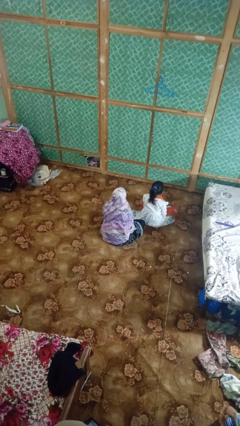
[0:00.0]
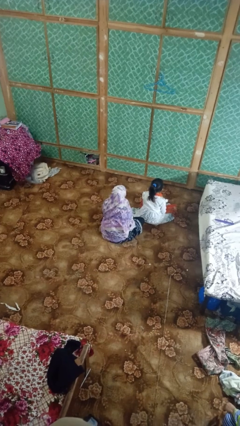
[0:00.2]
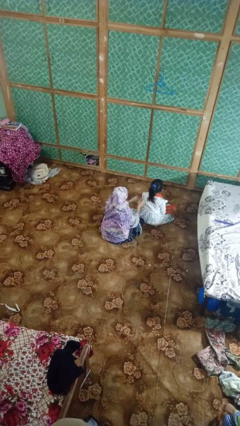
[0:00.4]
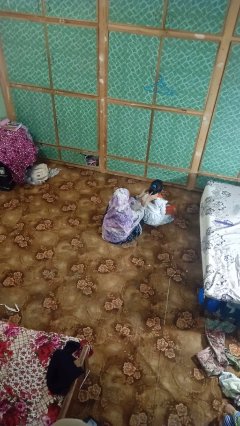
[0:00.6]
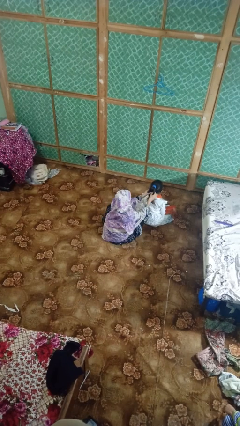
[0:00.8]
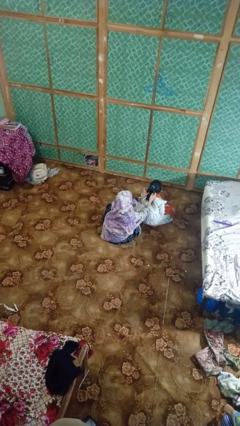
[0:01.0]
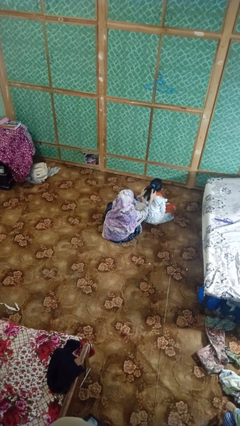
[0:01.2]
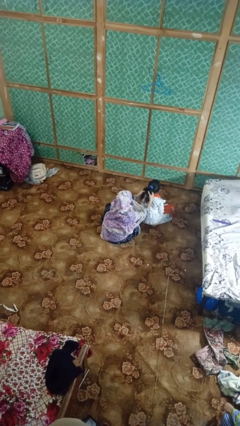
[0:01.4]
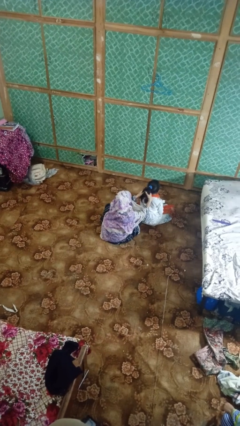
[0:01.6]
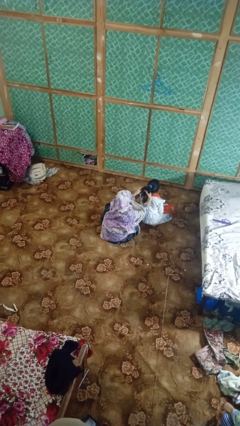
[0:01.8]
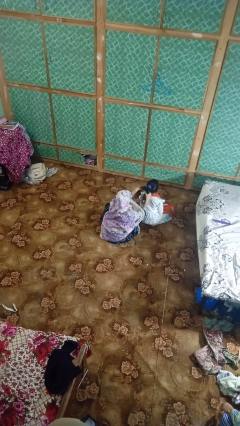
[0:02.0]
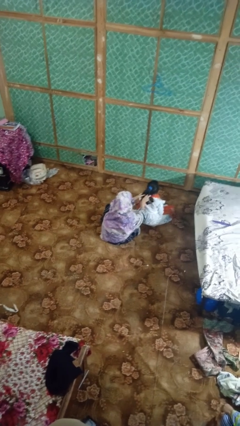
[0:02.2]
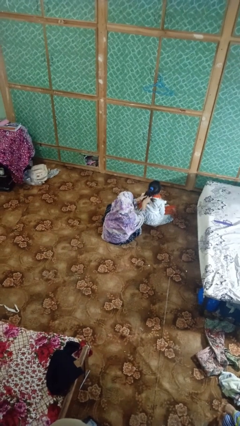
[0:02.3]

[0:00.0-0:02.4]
person braids hair of person

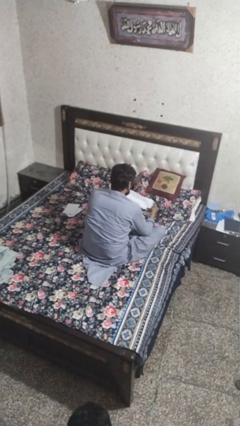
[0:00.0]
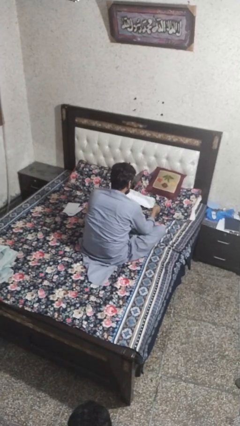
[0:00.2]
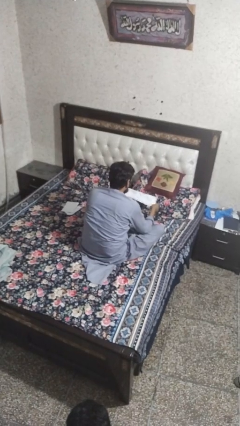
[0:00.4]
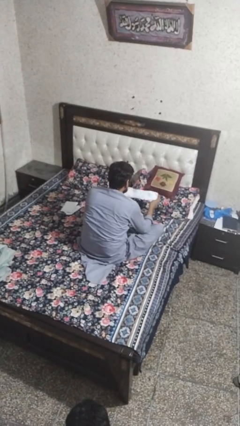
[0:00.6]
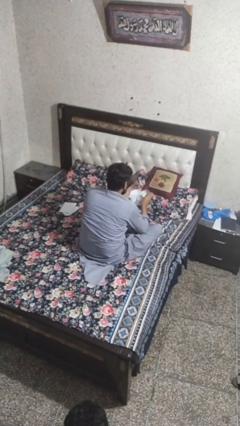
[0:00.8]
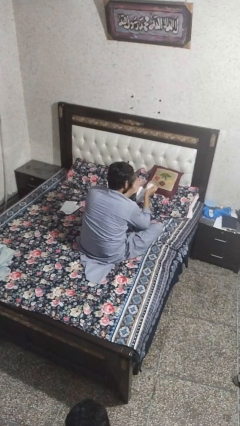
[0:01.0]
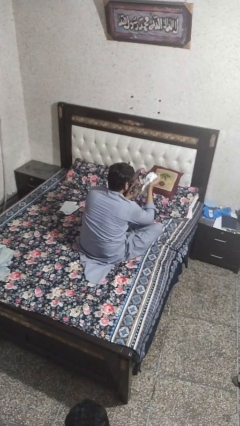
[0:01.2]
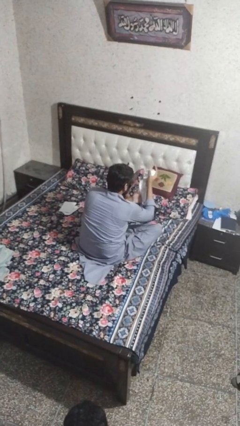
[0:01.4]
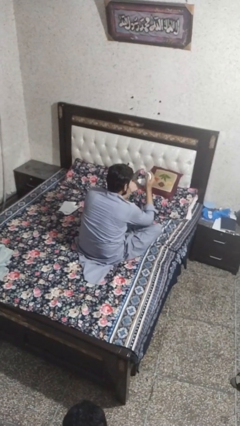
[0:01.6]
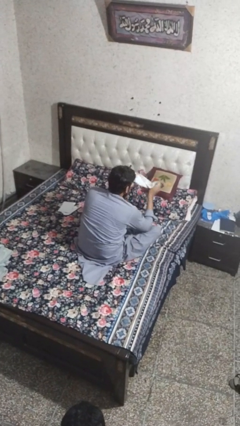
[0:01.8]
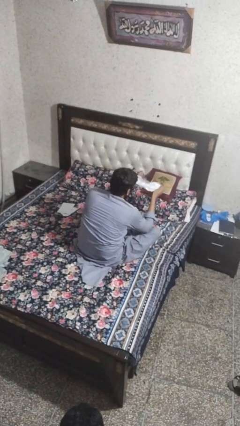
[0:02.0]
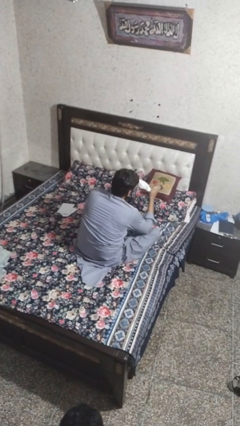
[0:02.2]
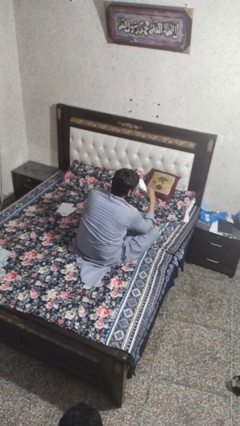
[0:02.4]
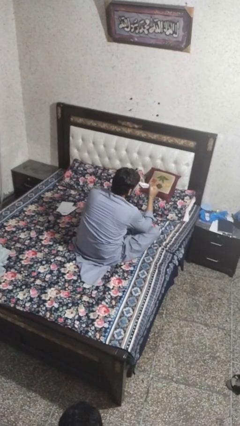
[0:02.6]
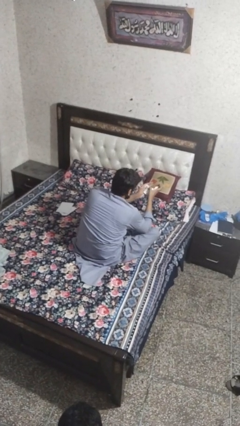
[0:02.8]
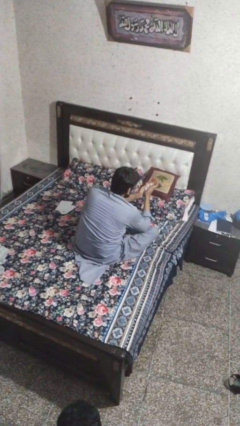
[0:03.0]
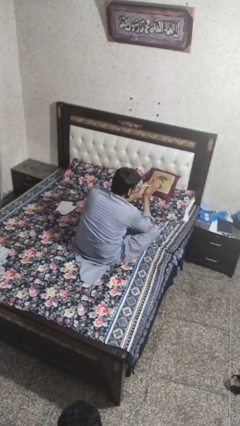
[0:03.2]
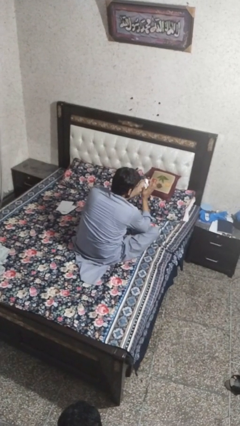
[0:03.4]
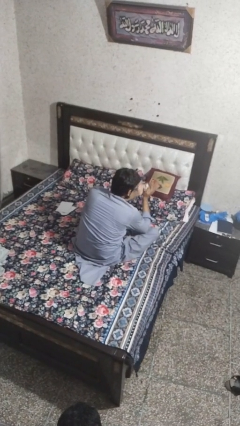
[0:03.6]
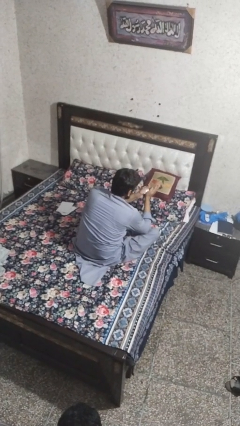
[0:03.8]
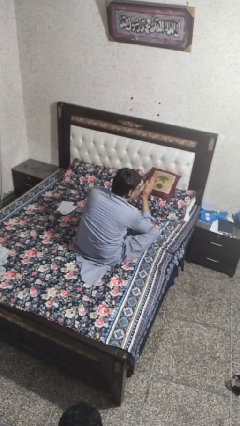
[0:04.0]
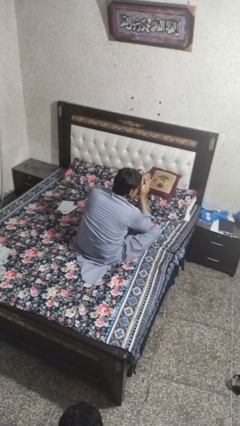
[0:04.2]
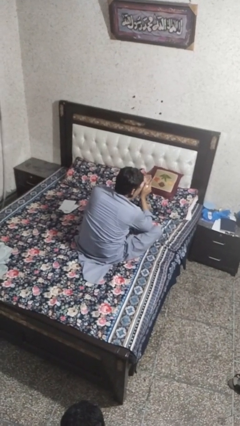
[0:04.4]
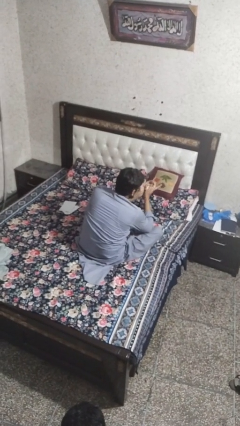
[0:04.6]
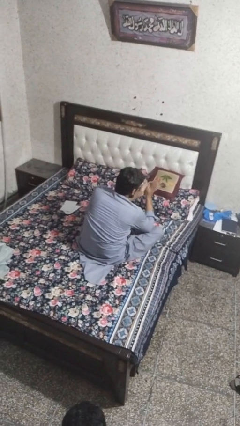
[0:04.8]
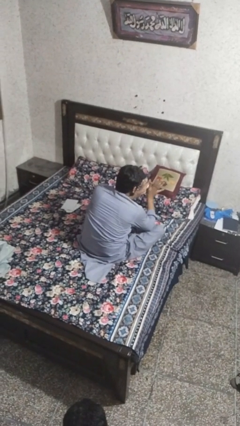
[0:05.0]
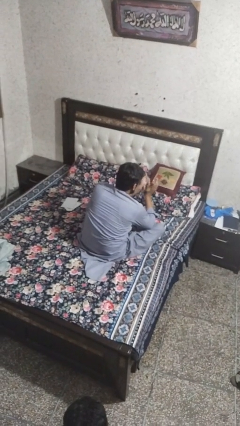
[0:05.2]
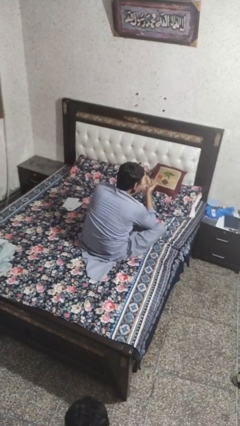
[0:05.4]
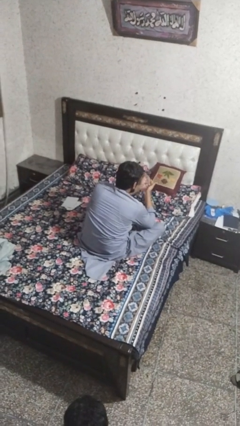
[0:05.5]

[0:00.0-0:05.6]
person crumples paper

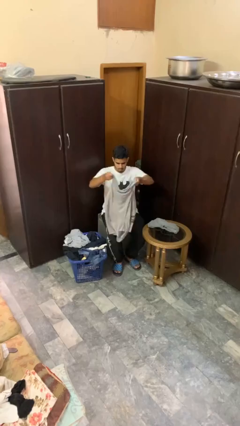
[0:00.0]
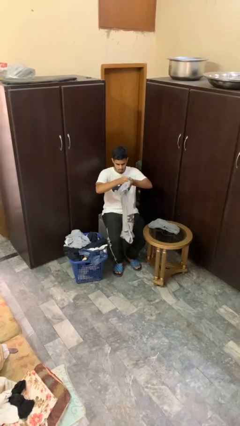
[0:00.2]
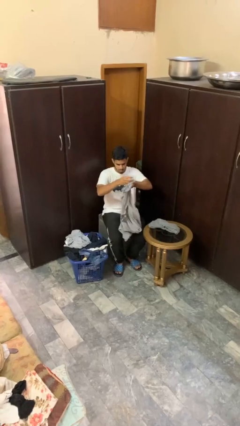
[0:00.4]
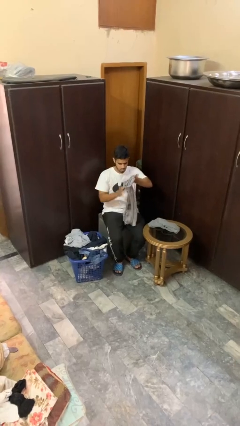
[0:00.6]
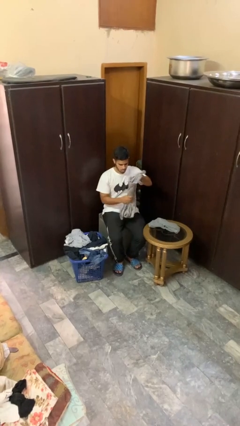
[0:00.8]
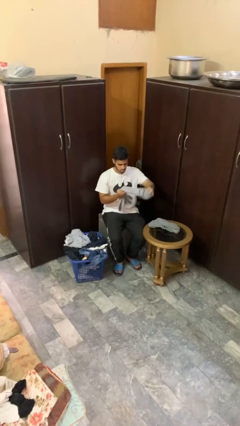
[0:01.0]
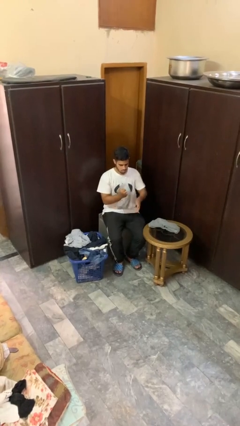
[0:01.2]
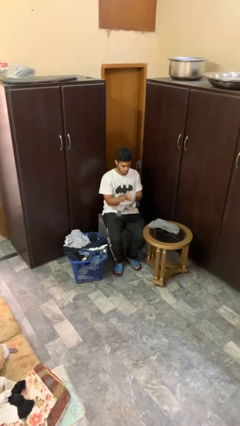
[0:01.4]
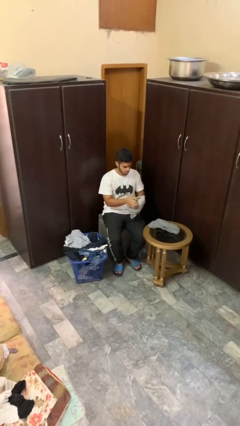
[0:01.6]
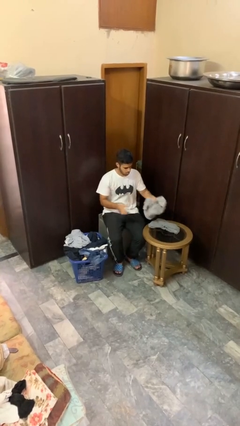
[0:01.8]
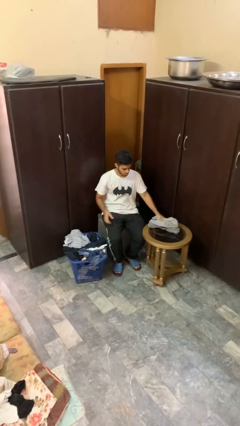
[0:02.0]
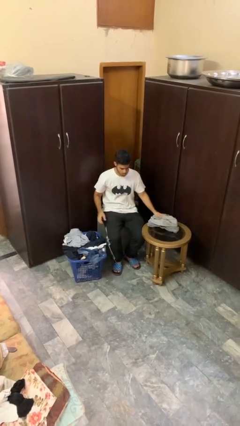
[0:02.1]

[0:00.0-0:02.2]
person folds shirt

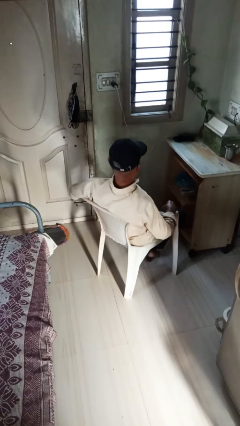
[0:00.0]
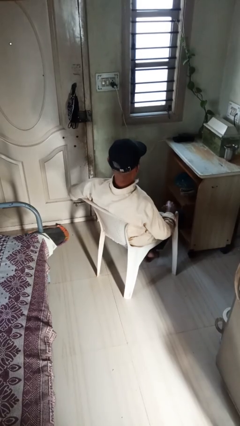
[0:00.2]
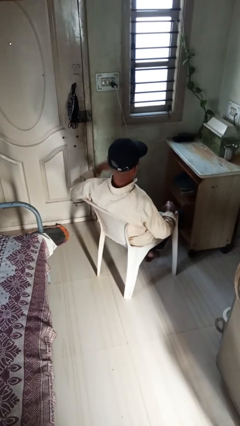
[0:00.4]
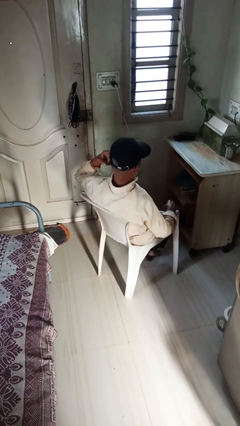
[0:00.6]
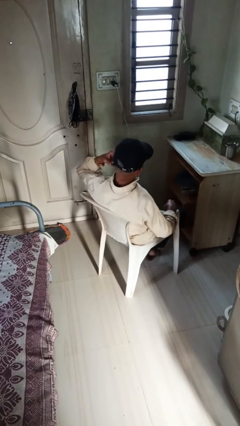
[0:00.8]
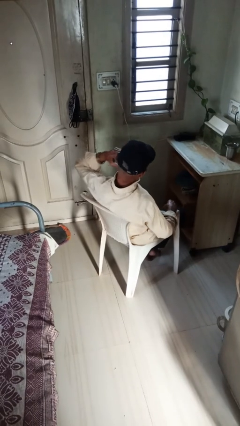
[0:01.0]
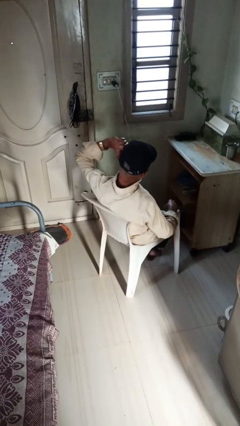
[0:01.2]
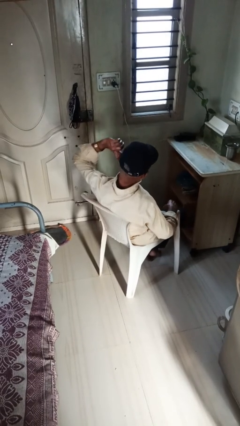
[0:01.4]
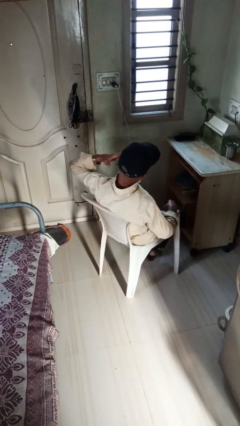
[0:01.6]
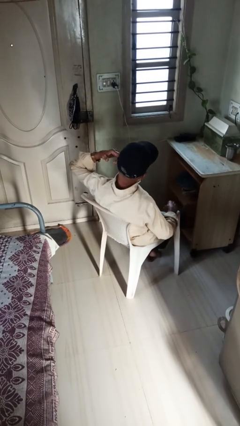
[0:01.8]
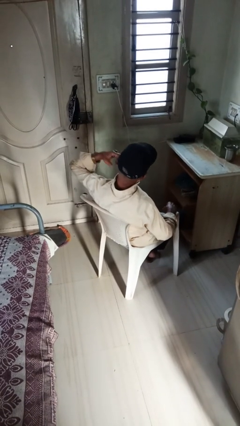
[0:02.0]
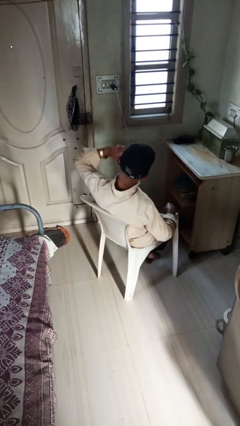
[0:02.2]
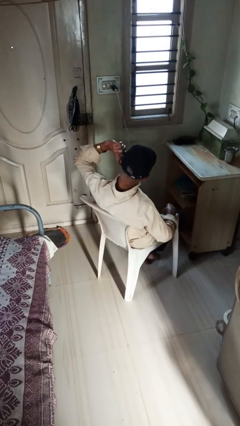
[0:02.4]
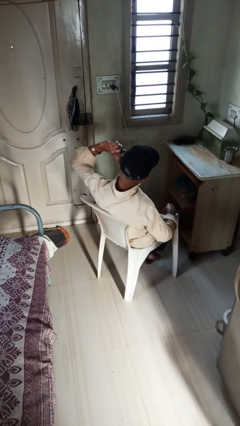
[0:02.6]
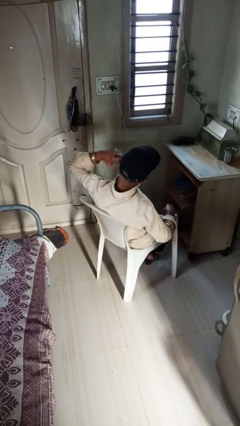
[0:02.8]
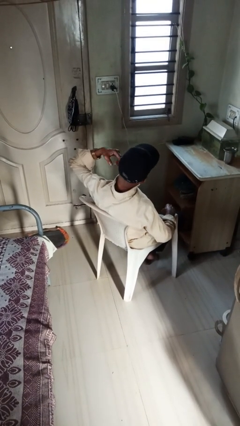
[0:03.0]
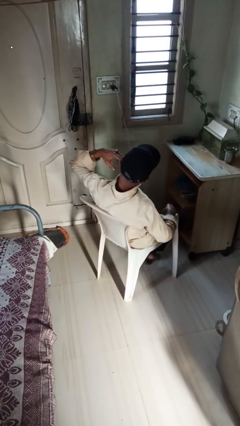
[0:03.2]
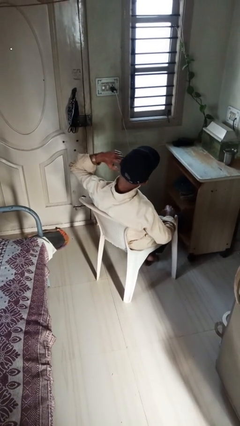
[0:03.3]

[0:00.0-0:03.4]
person puts fingers in ear

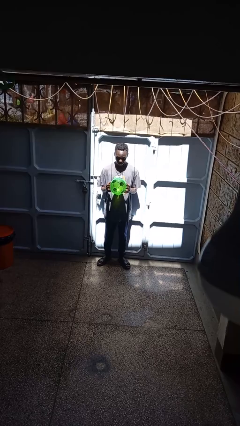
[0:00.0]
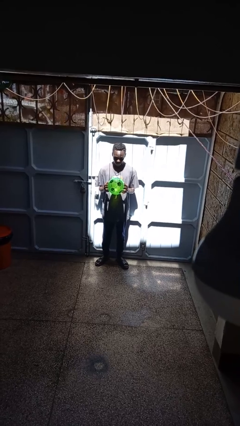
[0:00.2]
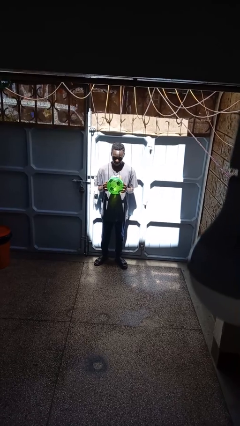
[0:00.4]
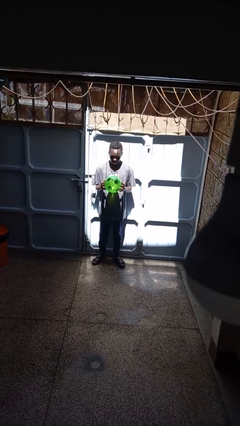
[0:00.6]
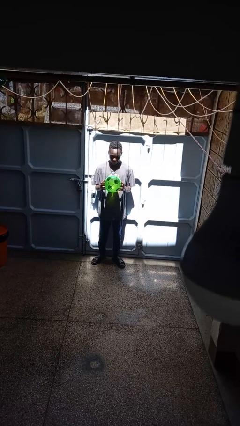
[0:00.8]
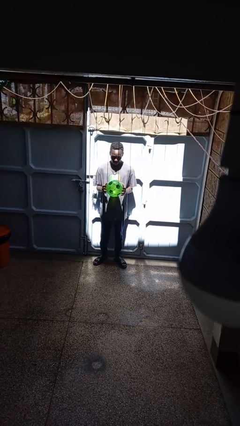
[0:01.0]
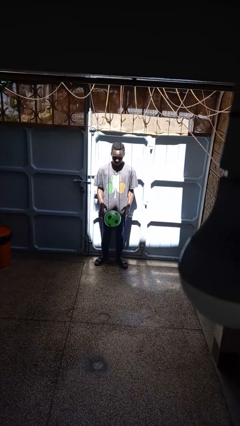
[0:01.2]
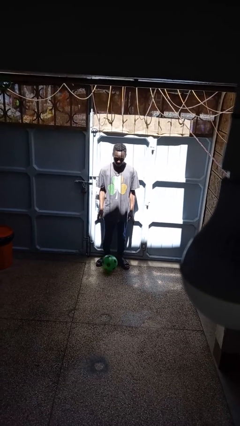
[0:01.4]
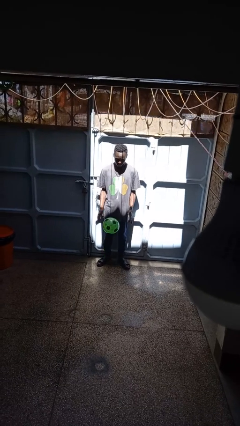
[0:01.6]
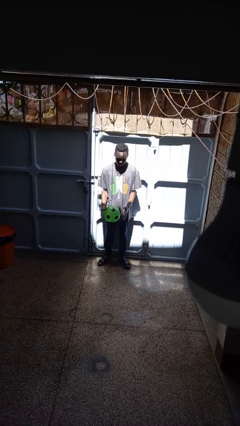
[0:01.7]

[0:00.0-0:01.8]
person bounces ball on floor

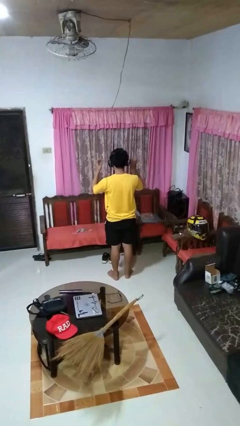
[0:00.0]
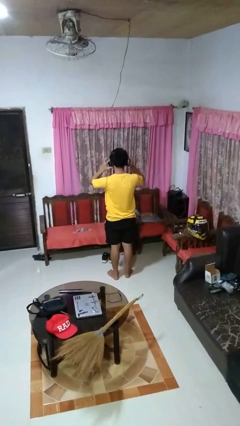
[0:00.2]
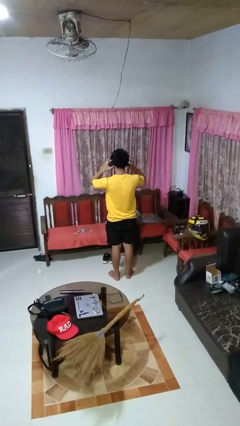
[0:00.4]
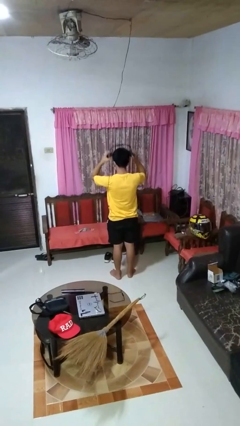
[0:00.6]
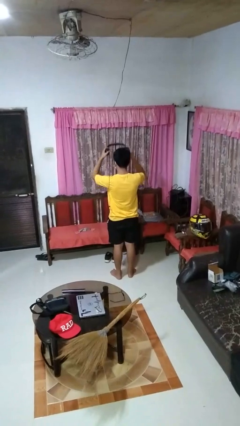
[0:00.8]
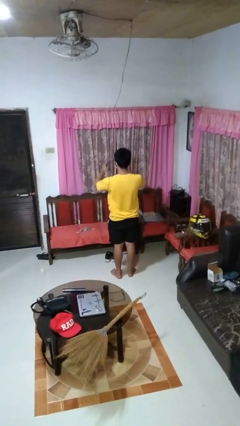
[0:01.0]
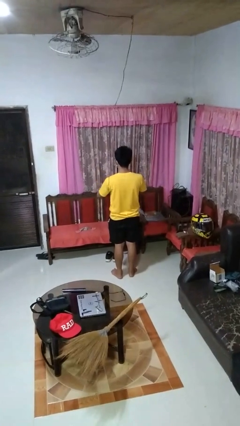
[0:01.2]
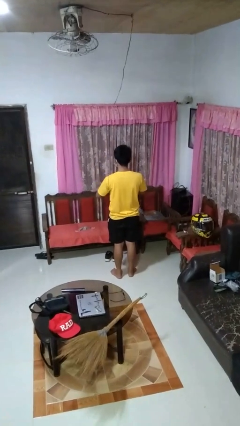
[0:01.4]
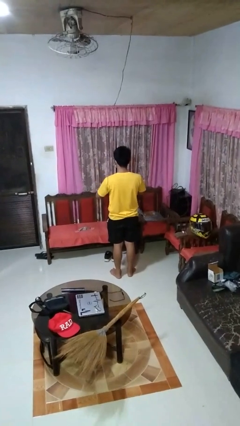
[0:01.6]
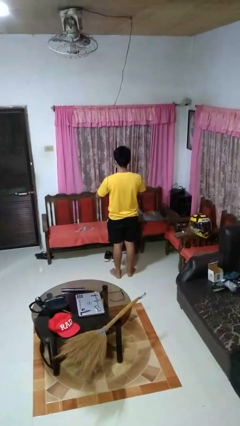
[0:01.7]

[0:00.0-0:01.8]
person takes off headphones
